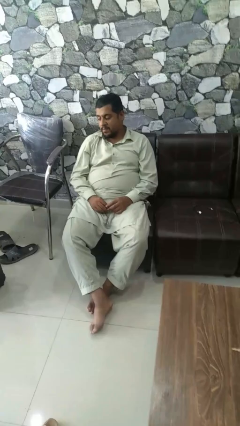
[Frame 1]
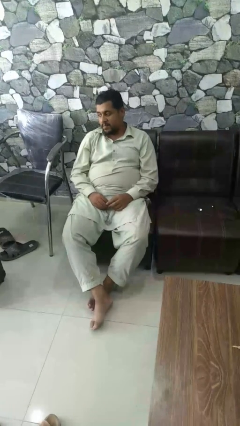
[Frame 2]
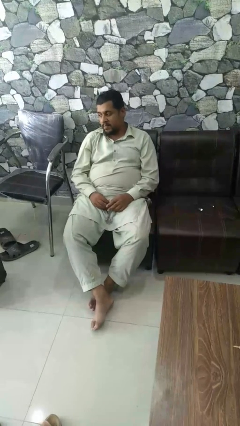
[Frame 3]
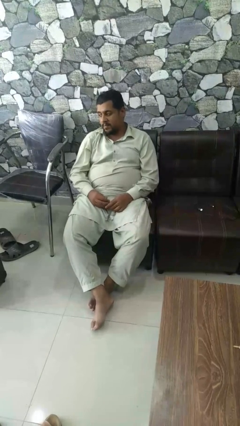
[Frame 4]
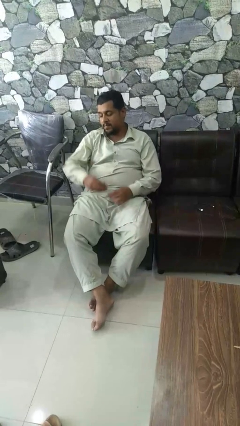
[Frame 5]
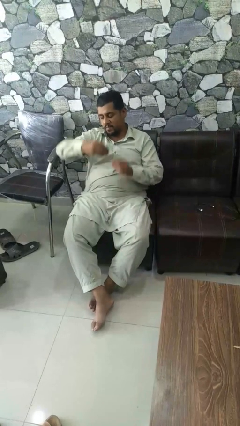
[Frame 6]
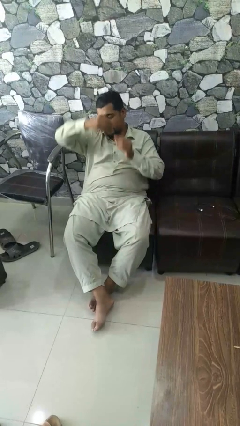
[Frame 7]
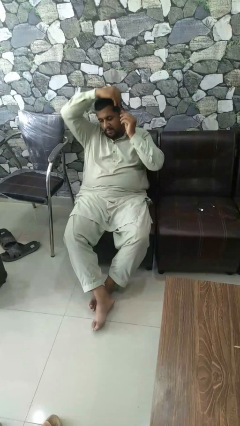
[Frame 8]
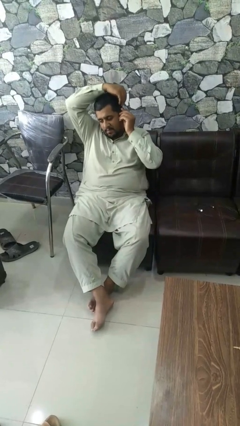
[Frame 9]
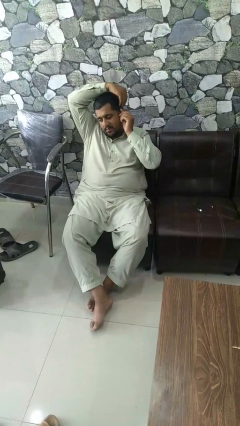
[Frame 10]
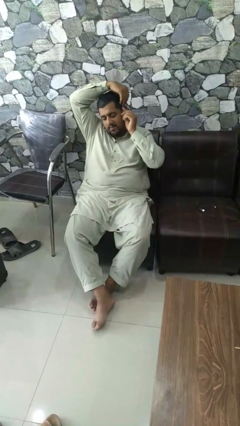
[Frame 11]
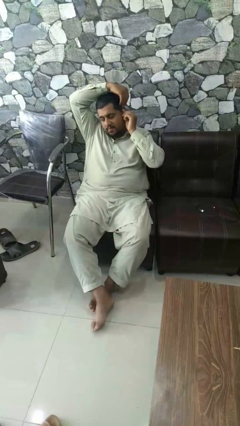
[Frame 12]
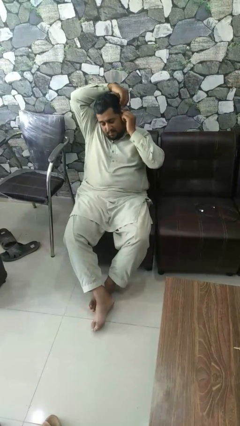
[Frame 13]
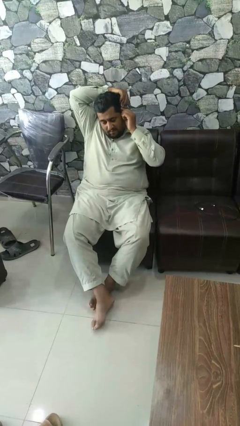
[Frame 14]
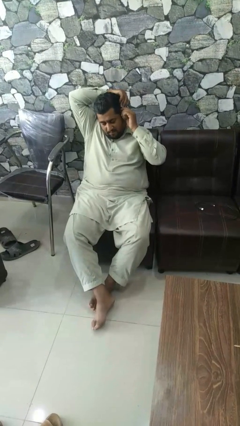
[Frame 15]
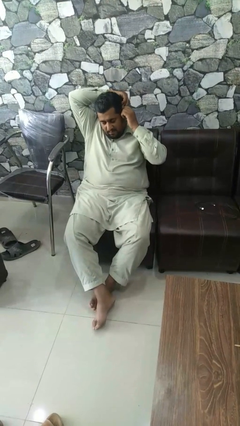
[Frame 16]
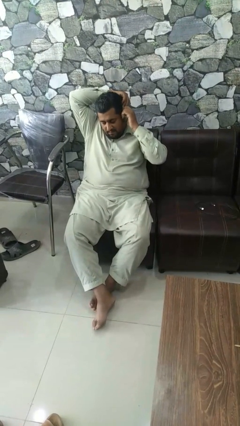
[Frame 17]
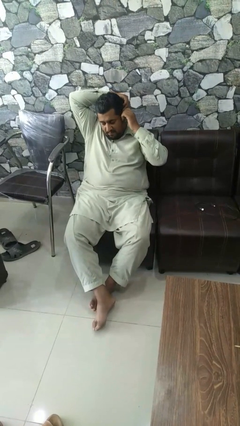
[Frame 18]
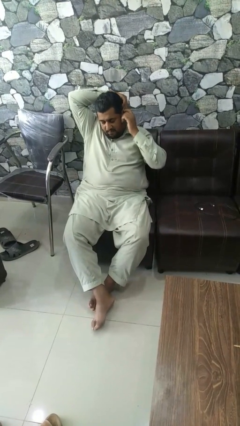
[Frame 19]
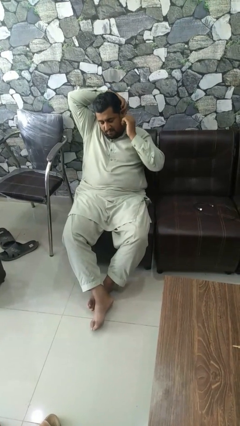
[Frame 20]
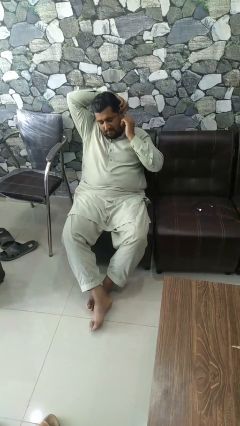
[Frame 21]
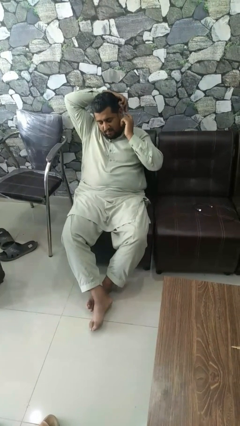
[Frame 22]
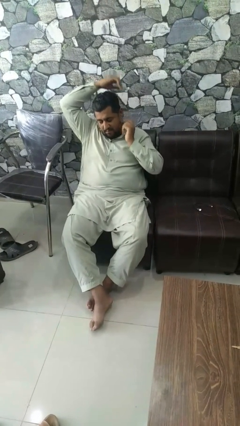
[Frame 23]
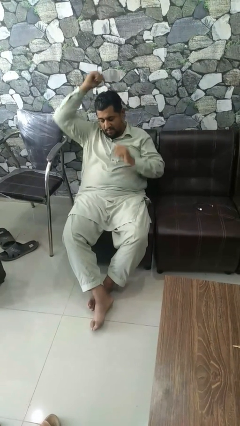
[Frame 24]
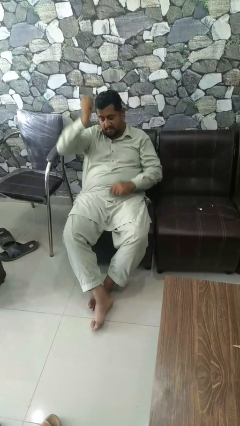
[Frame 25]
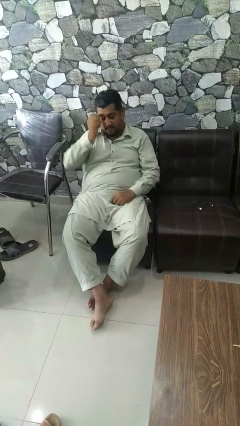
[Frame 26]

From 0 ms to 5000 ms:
person puts on earrings

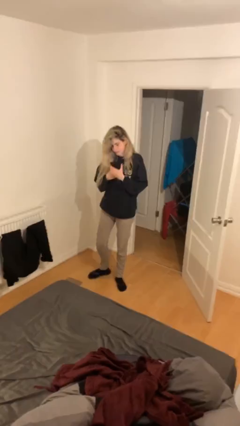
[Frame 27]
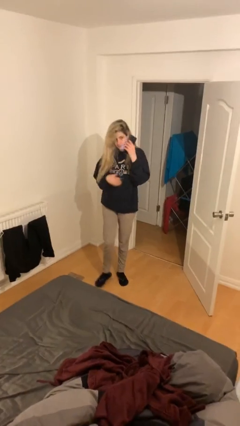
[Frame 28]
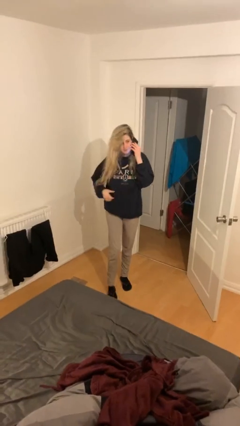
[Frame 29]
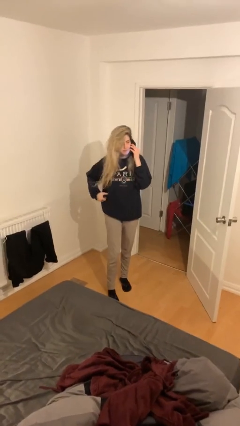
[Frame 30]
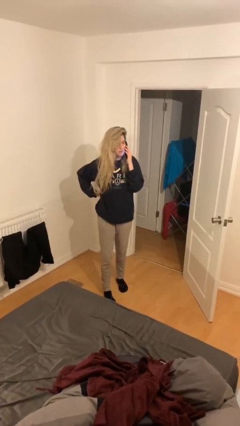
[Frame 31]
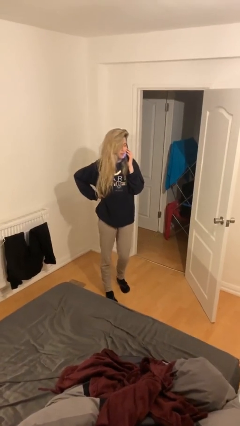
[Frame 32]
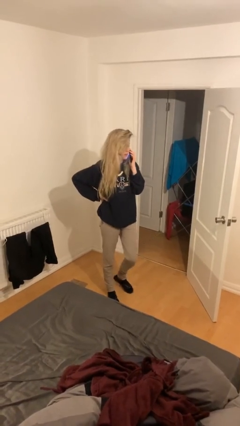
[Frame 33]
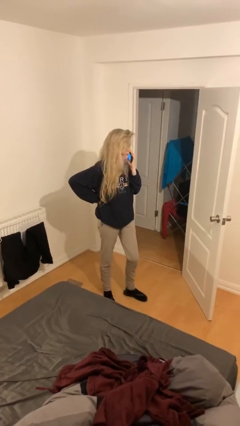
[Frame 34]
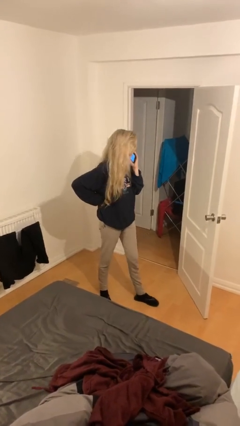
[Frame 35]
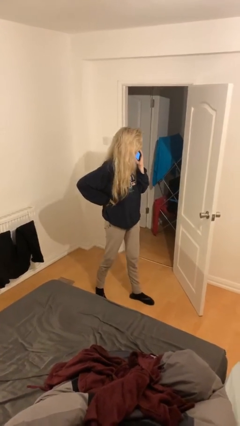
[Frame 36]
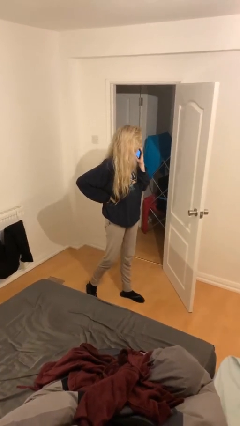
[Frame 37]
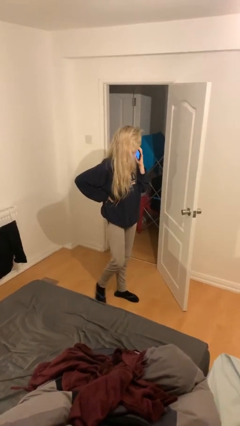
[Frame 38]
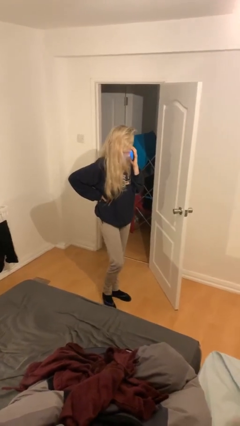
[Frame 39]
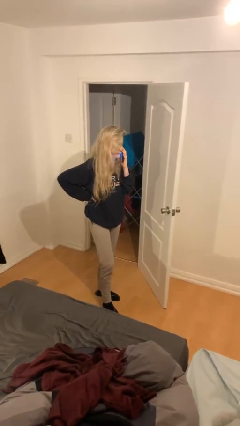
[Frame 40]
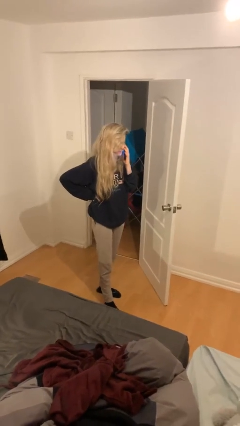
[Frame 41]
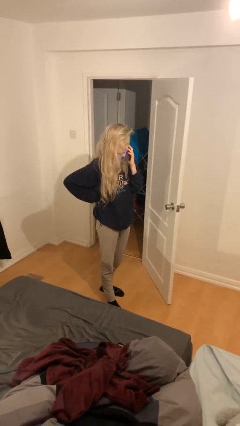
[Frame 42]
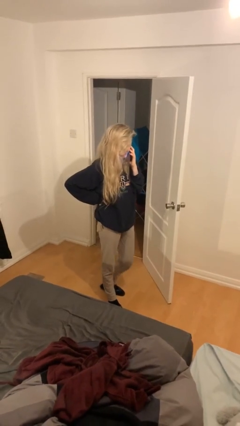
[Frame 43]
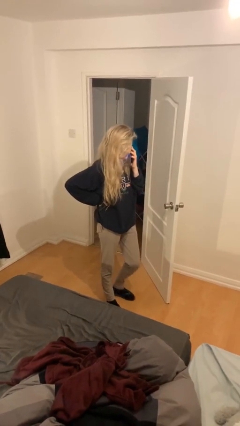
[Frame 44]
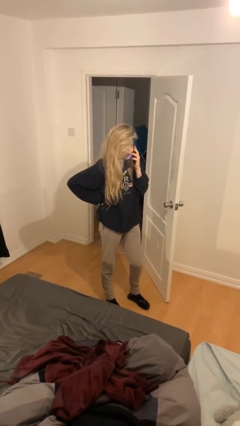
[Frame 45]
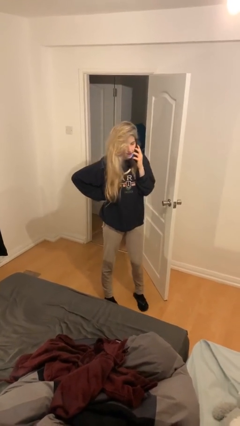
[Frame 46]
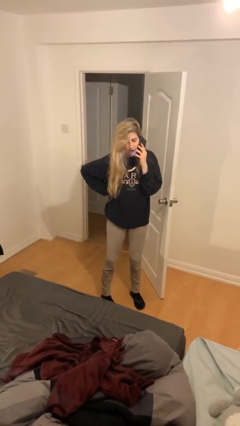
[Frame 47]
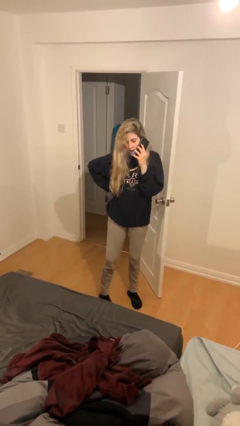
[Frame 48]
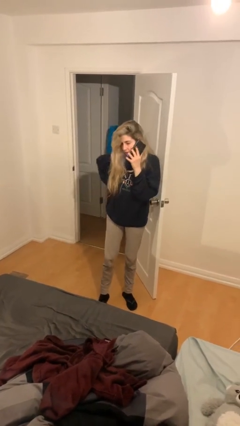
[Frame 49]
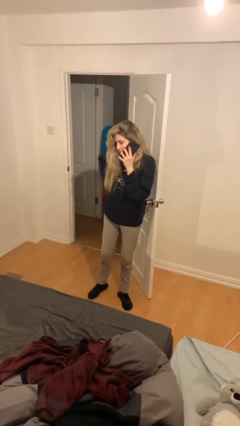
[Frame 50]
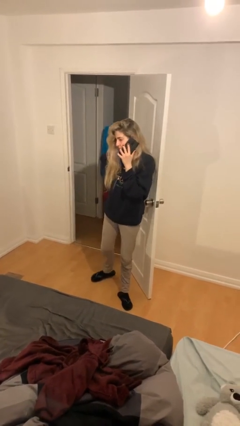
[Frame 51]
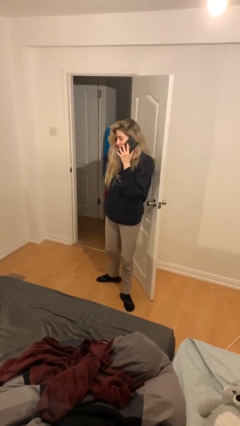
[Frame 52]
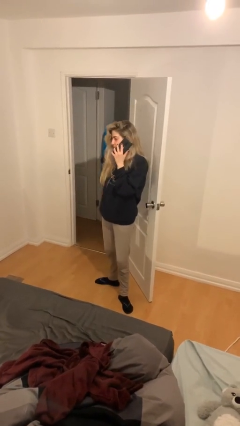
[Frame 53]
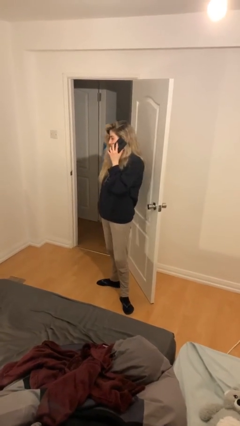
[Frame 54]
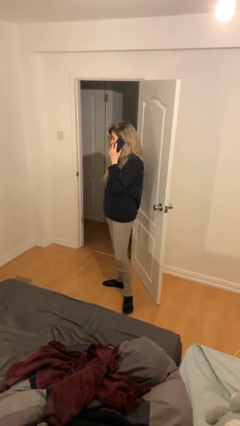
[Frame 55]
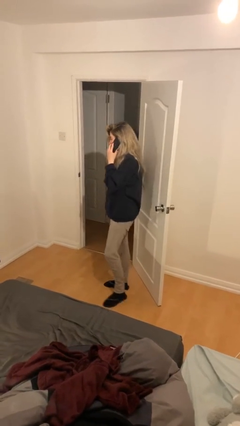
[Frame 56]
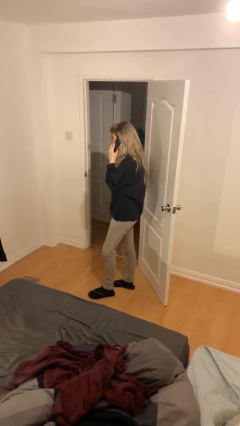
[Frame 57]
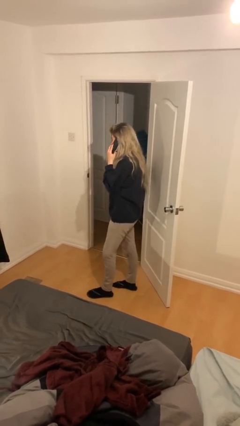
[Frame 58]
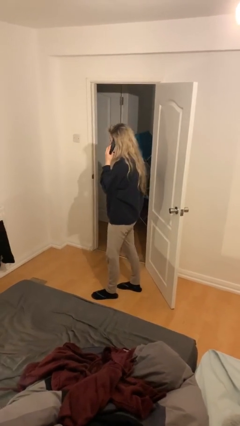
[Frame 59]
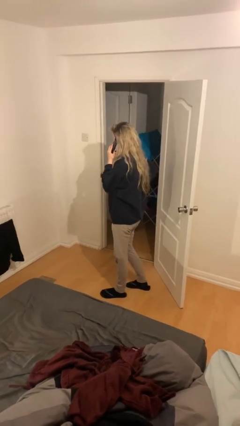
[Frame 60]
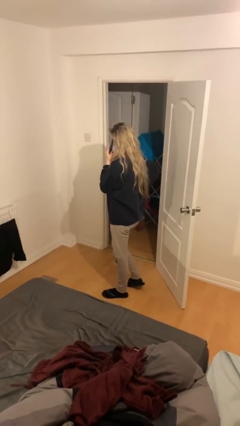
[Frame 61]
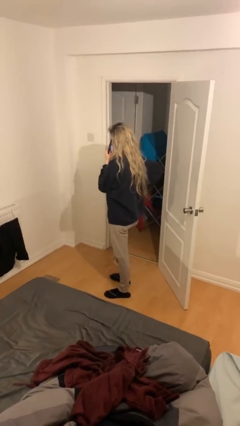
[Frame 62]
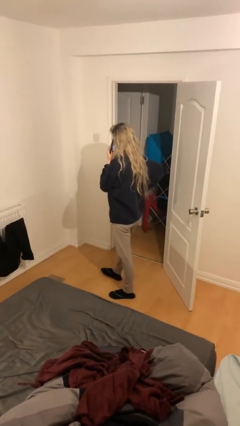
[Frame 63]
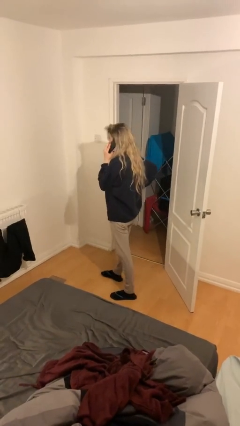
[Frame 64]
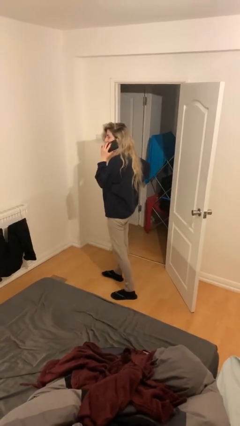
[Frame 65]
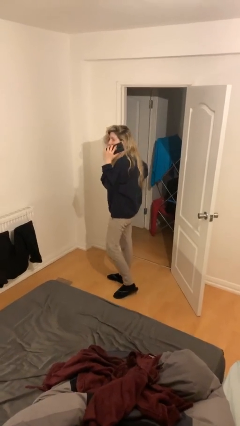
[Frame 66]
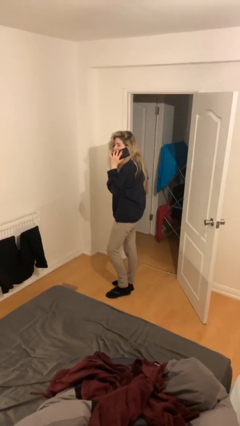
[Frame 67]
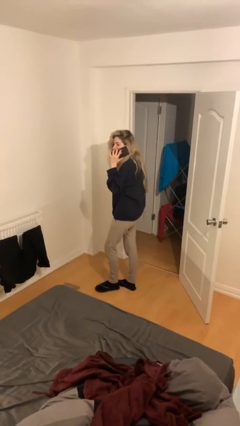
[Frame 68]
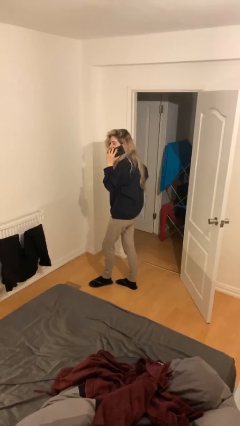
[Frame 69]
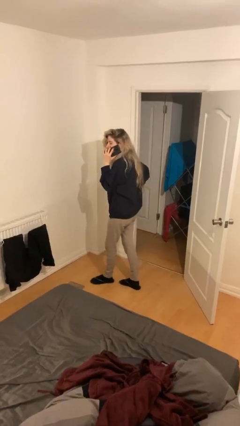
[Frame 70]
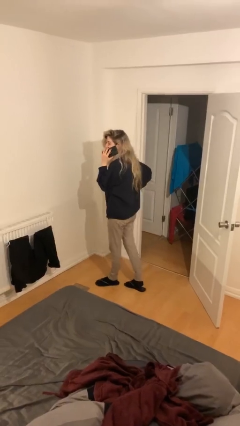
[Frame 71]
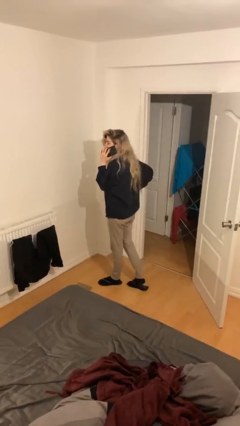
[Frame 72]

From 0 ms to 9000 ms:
person talks on phone

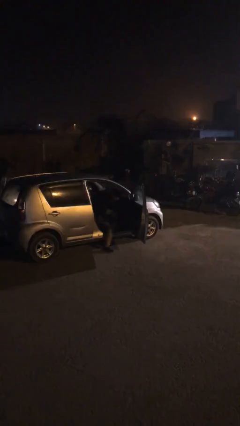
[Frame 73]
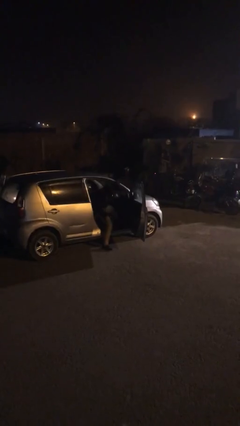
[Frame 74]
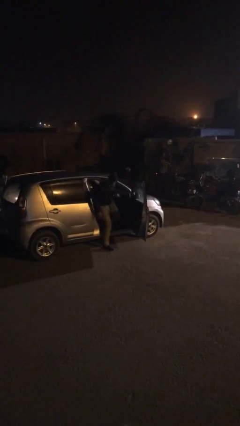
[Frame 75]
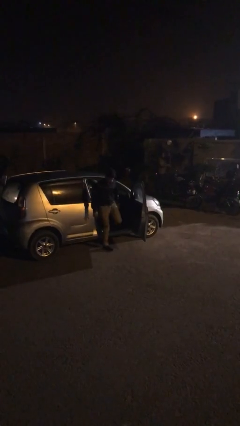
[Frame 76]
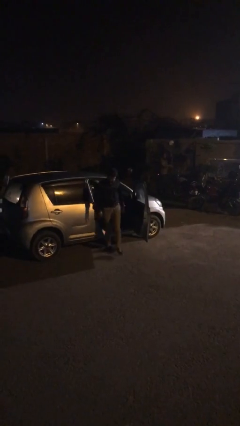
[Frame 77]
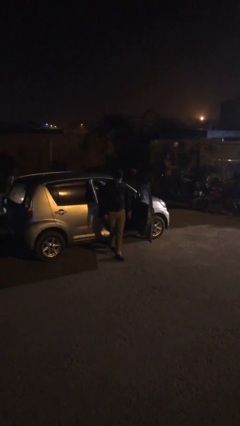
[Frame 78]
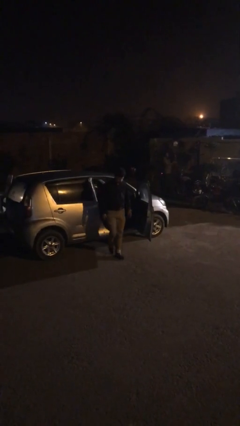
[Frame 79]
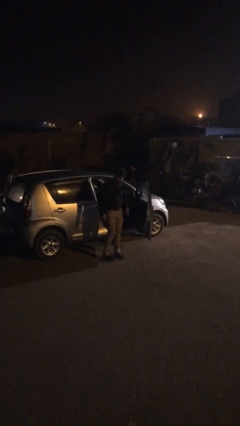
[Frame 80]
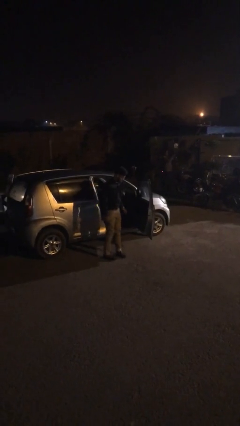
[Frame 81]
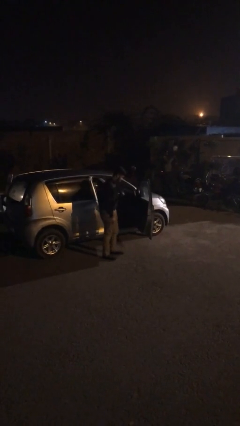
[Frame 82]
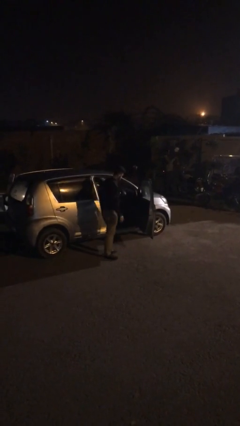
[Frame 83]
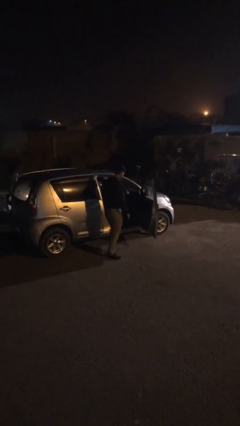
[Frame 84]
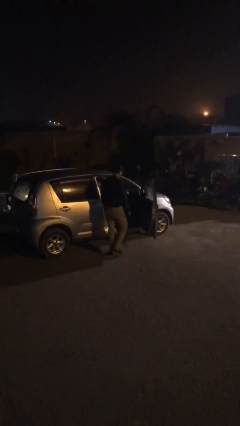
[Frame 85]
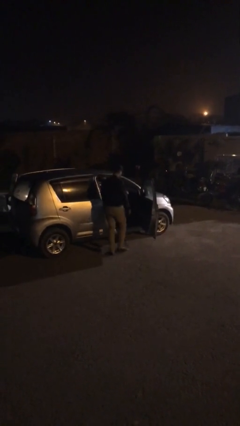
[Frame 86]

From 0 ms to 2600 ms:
person exits car

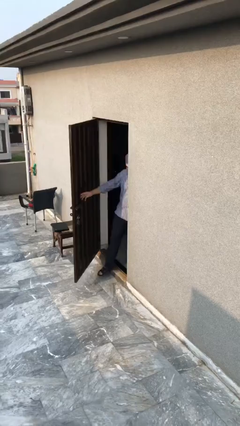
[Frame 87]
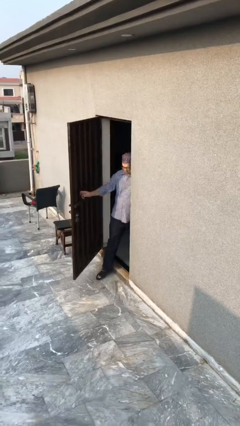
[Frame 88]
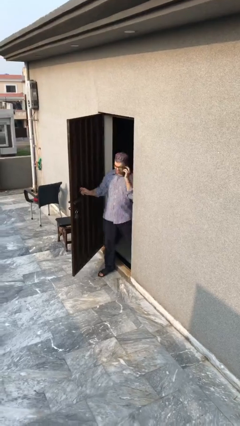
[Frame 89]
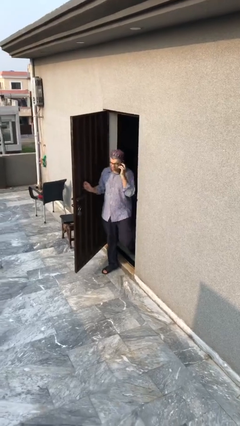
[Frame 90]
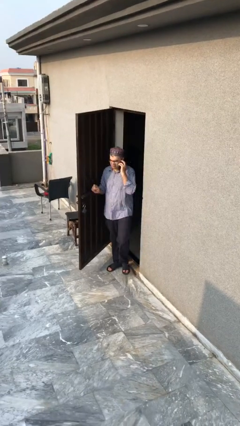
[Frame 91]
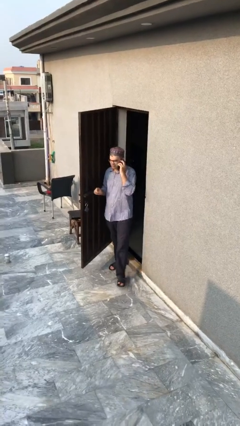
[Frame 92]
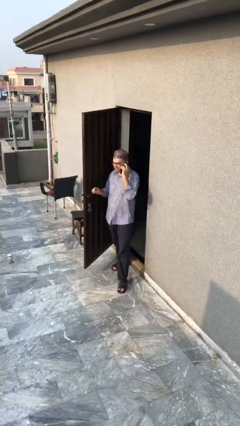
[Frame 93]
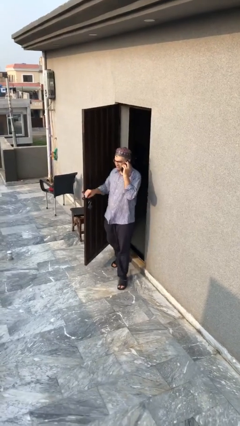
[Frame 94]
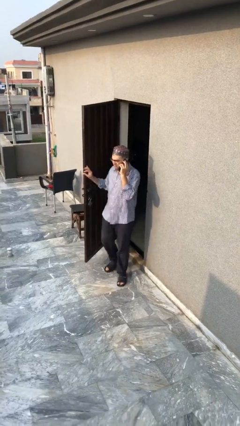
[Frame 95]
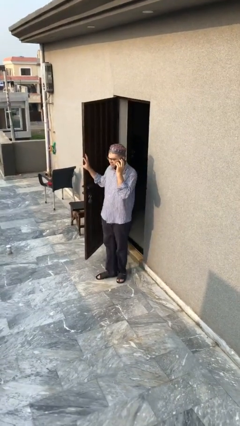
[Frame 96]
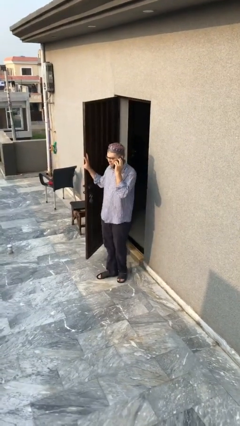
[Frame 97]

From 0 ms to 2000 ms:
person enters scene through structure
